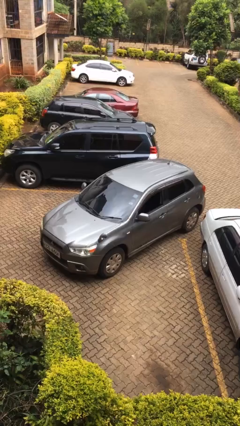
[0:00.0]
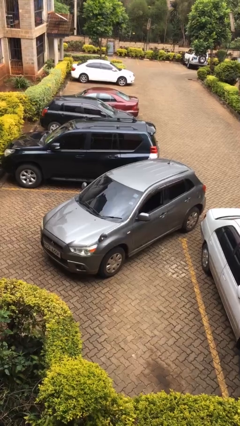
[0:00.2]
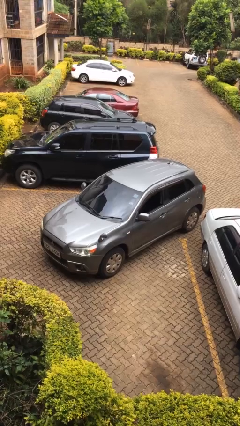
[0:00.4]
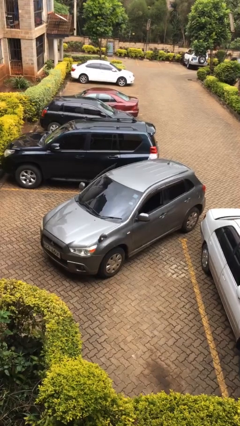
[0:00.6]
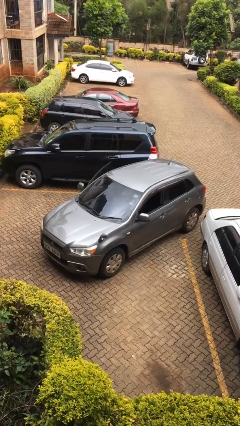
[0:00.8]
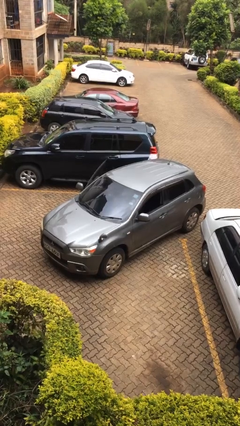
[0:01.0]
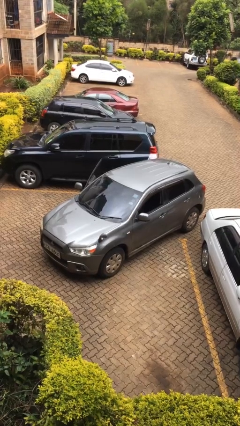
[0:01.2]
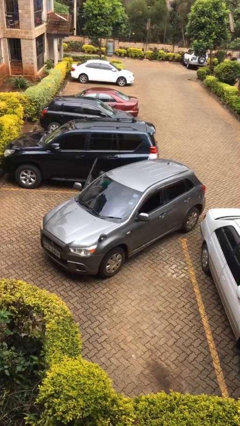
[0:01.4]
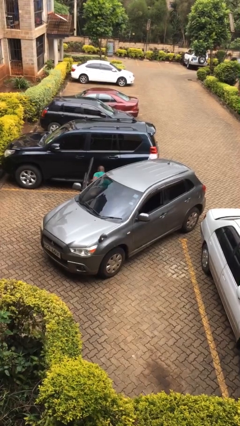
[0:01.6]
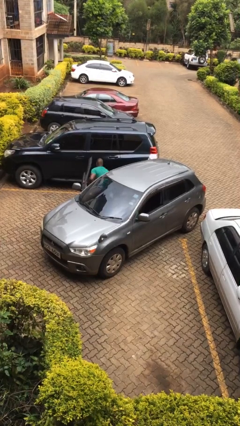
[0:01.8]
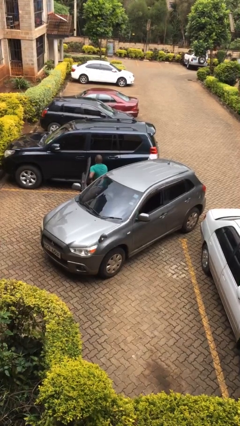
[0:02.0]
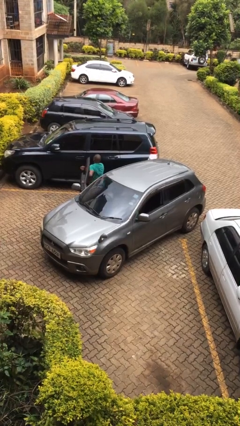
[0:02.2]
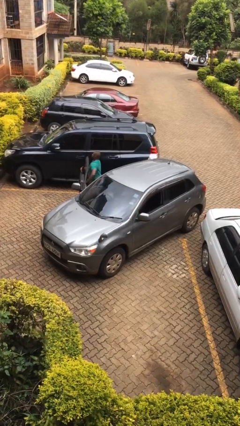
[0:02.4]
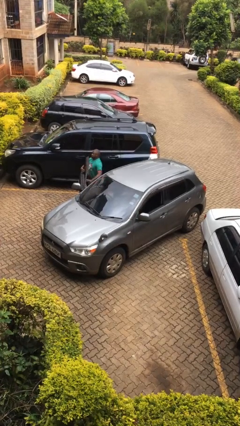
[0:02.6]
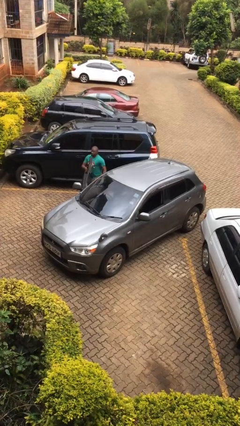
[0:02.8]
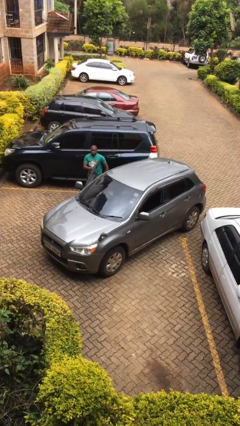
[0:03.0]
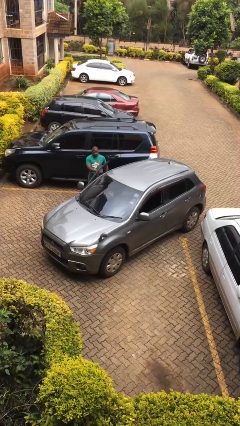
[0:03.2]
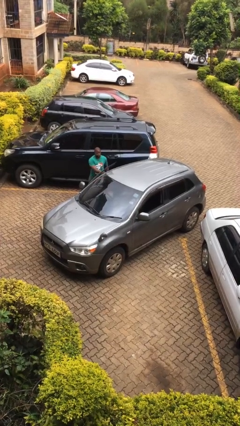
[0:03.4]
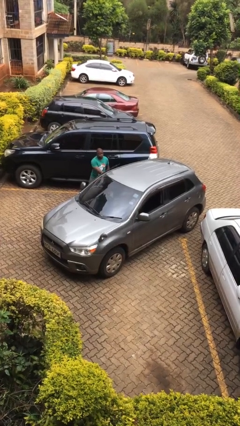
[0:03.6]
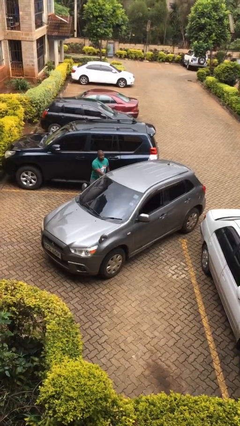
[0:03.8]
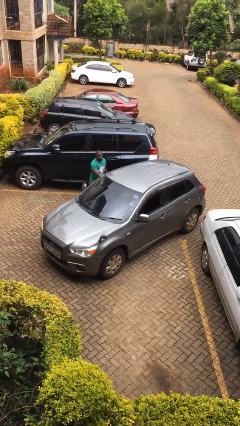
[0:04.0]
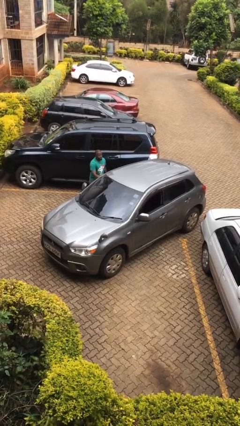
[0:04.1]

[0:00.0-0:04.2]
car drops off person

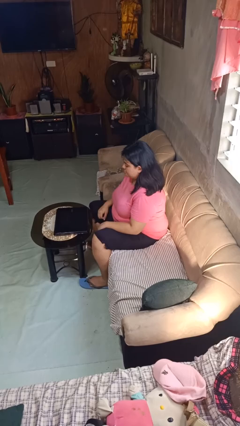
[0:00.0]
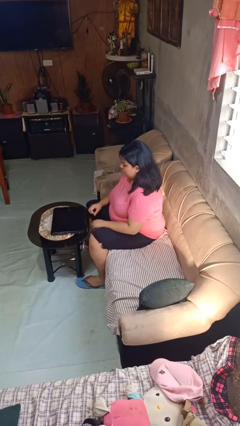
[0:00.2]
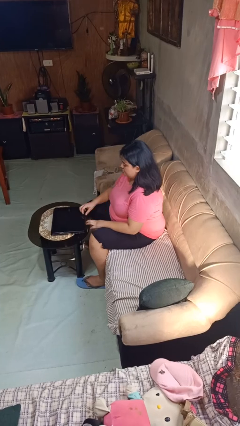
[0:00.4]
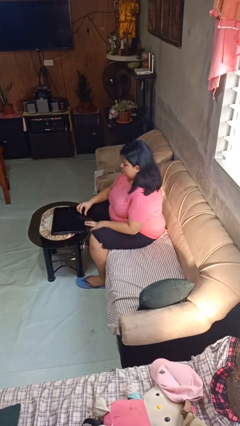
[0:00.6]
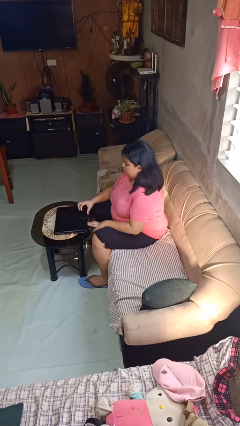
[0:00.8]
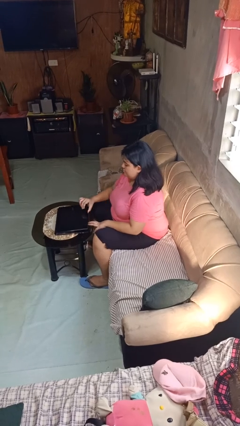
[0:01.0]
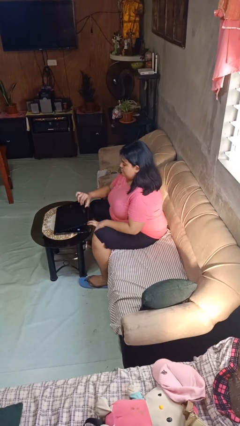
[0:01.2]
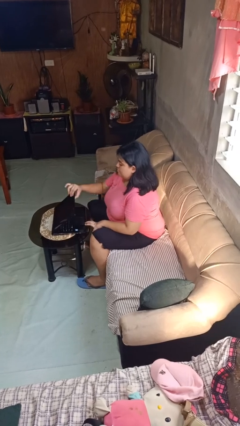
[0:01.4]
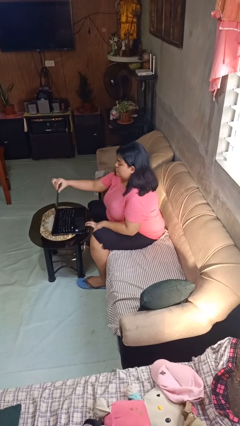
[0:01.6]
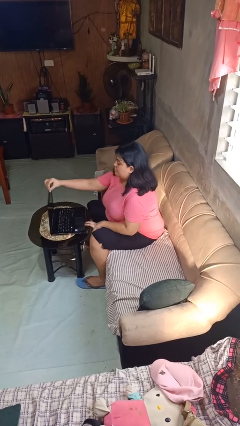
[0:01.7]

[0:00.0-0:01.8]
person opens laptop

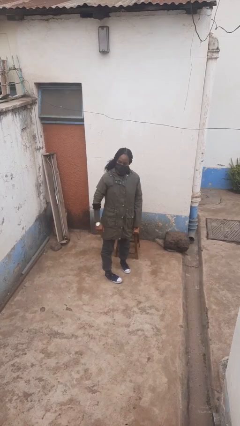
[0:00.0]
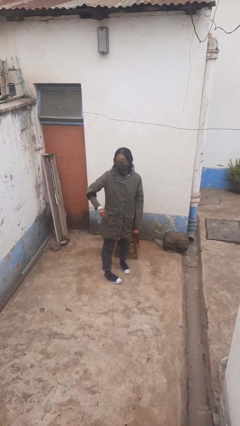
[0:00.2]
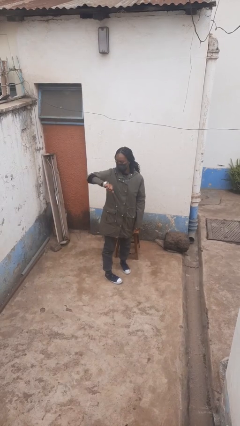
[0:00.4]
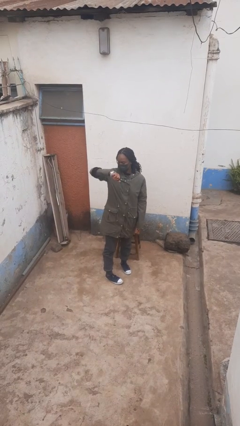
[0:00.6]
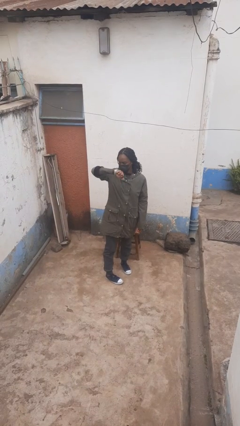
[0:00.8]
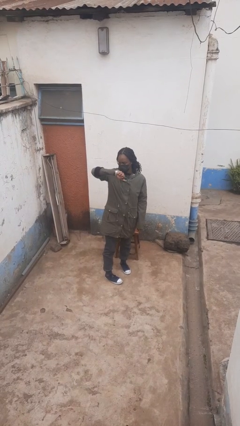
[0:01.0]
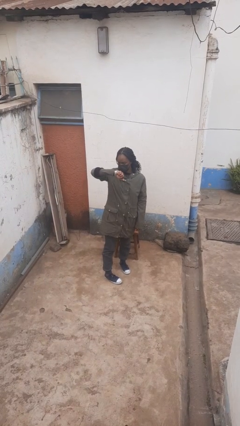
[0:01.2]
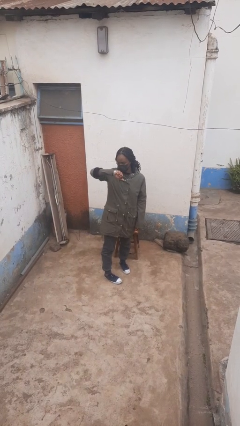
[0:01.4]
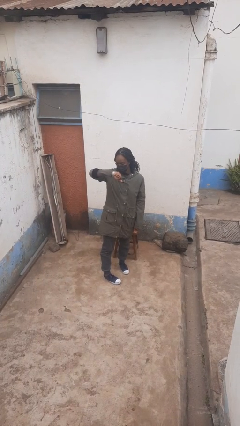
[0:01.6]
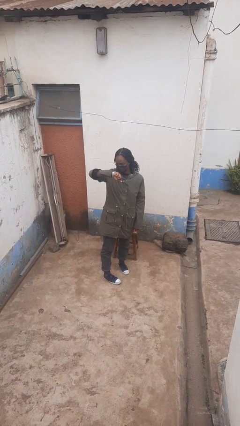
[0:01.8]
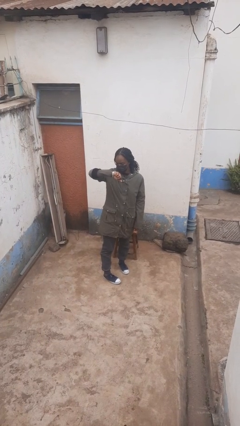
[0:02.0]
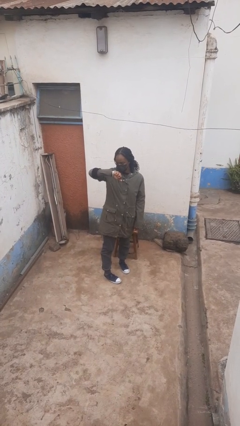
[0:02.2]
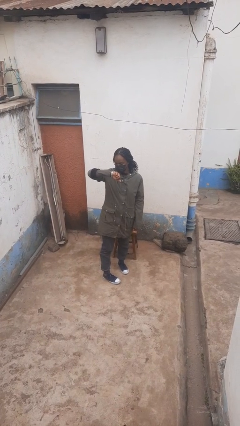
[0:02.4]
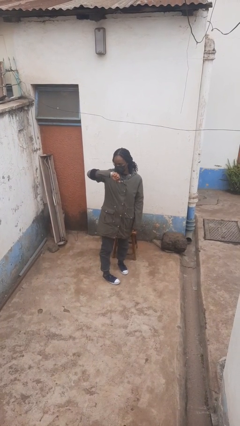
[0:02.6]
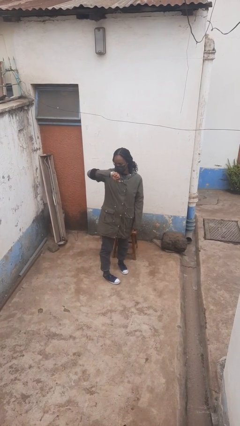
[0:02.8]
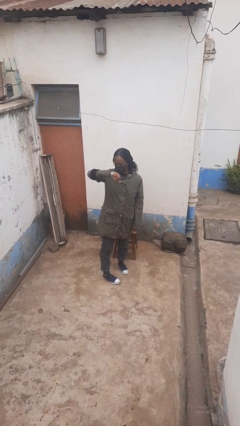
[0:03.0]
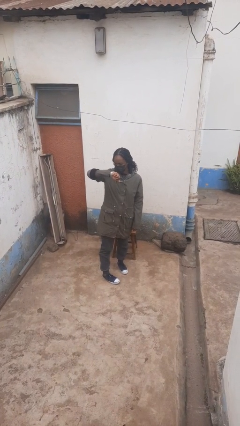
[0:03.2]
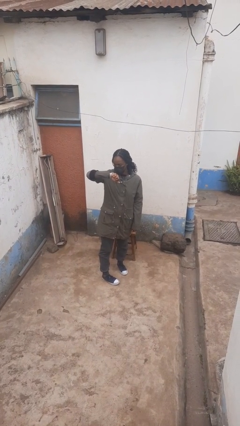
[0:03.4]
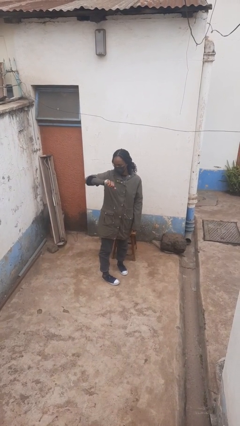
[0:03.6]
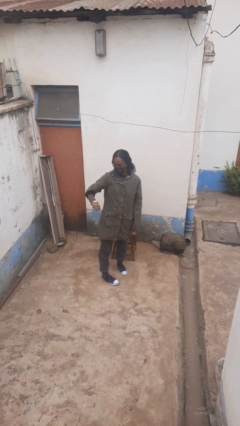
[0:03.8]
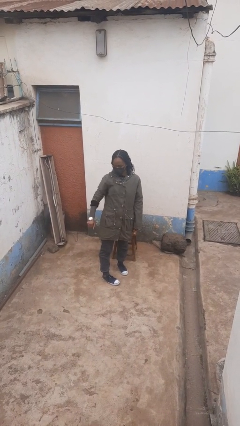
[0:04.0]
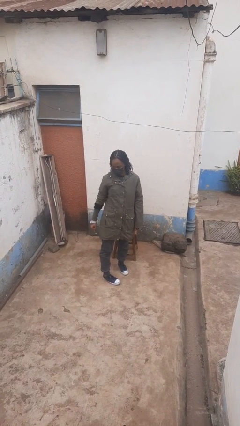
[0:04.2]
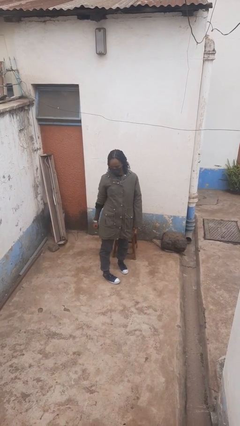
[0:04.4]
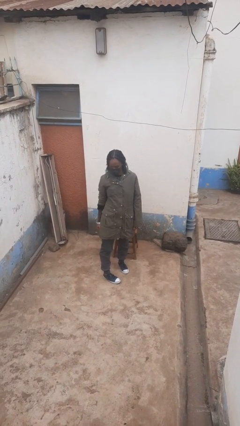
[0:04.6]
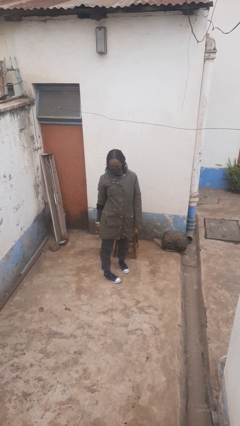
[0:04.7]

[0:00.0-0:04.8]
person looks at wristwatch

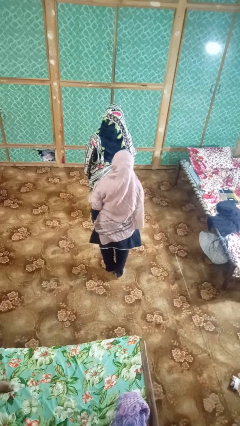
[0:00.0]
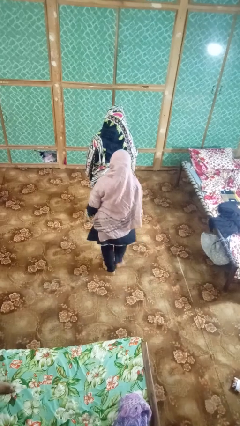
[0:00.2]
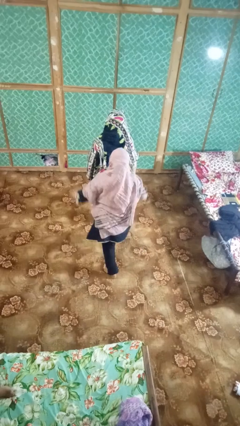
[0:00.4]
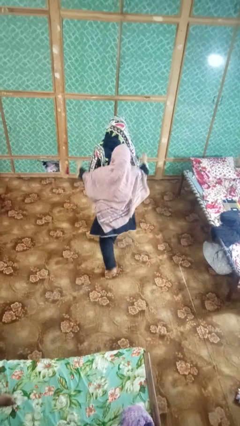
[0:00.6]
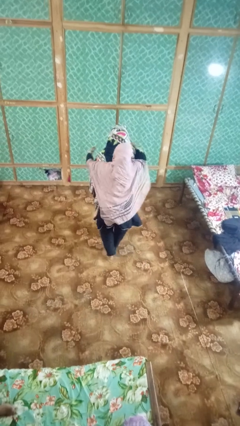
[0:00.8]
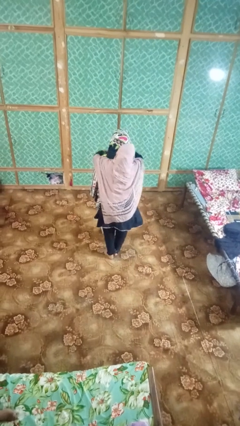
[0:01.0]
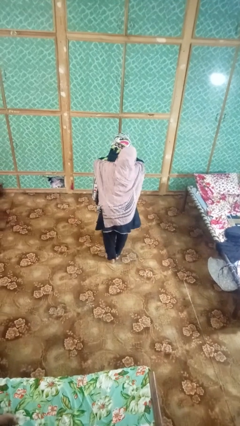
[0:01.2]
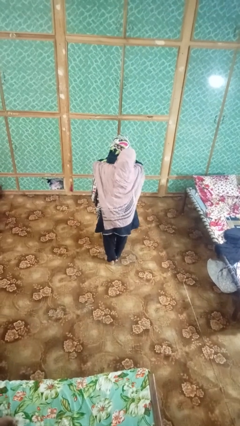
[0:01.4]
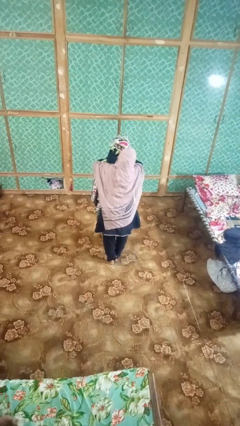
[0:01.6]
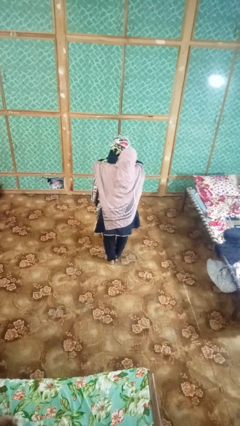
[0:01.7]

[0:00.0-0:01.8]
person hugs person from behind

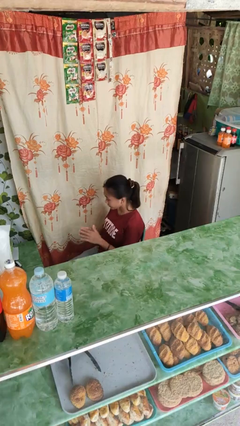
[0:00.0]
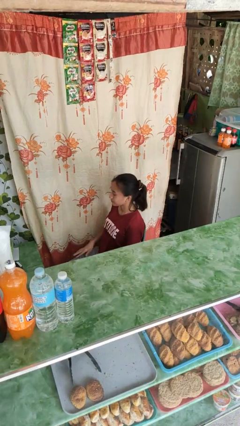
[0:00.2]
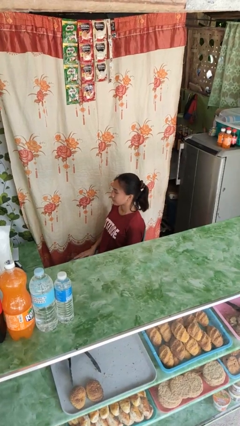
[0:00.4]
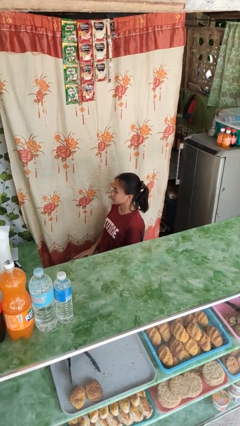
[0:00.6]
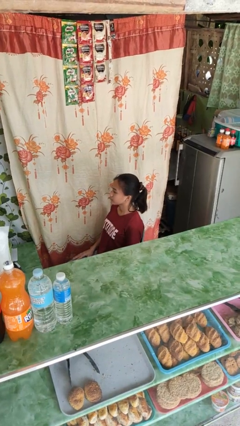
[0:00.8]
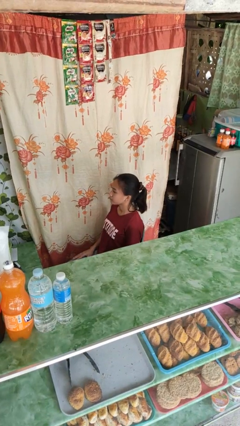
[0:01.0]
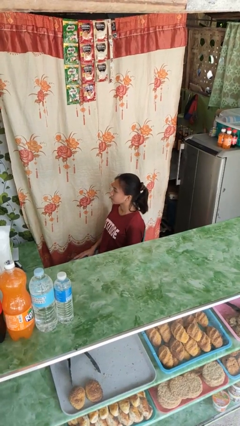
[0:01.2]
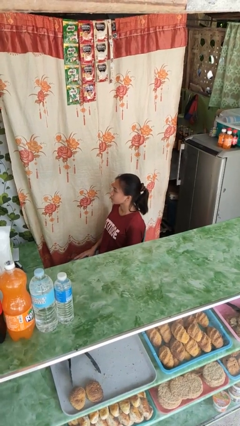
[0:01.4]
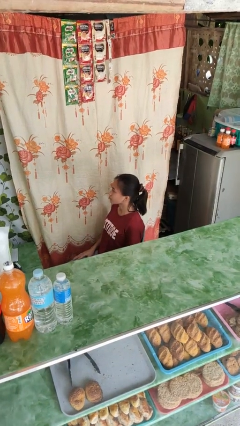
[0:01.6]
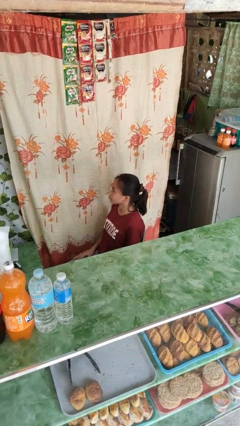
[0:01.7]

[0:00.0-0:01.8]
person rubs eyes

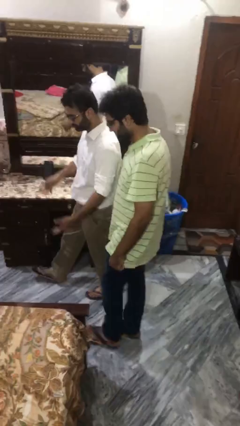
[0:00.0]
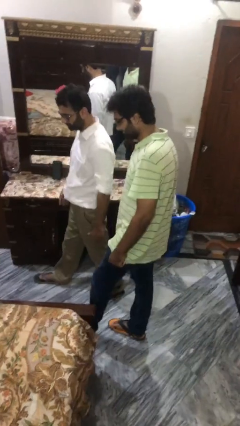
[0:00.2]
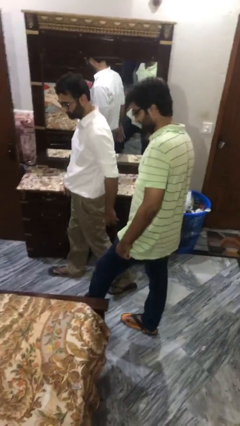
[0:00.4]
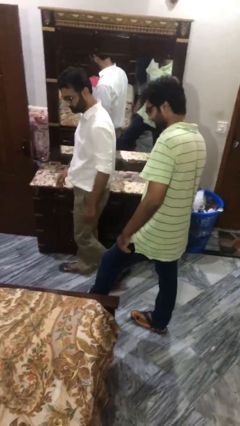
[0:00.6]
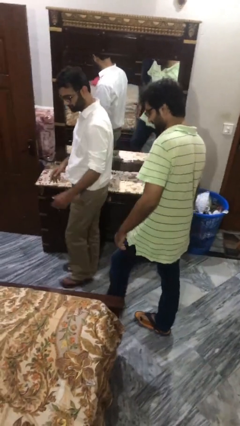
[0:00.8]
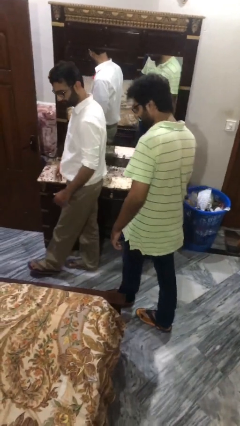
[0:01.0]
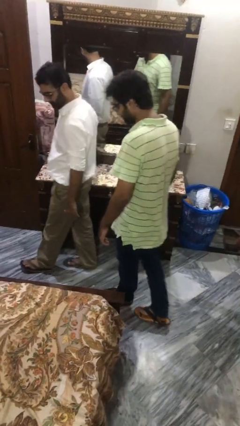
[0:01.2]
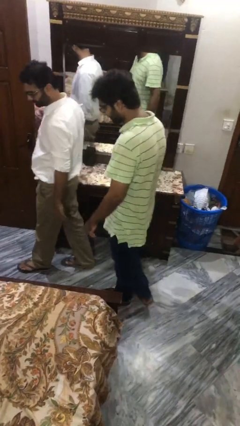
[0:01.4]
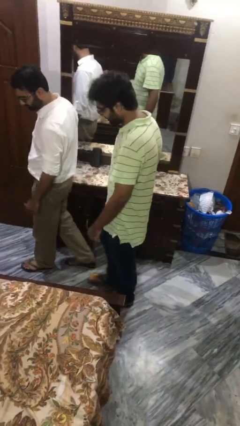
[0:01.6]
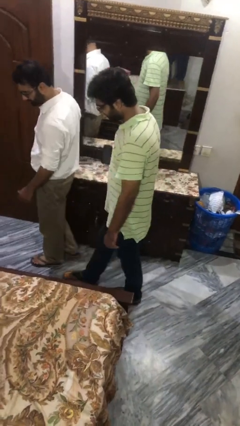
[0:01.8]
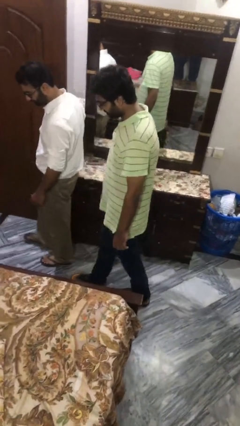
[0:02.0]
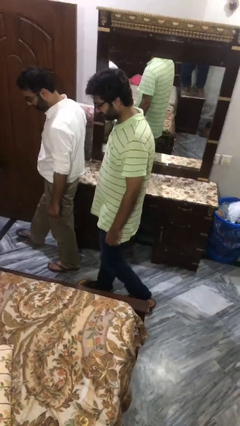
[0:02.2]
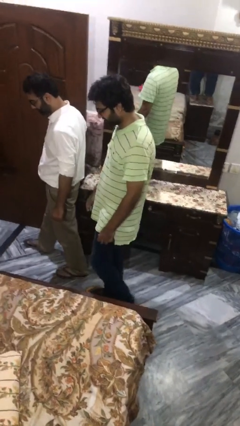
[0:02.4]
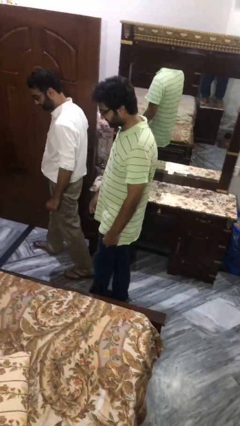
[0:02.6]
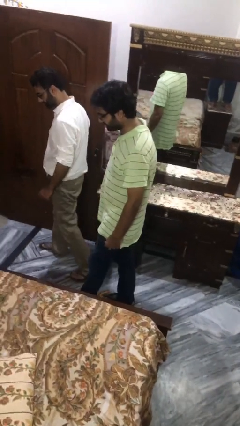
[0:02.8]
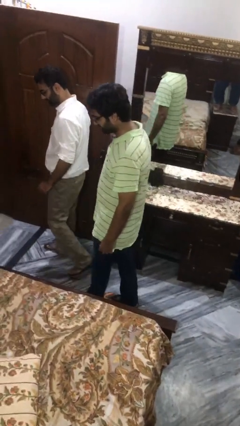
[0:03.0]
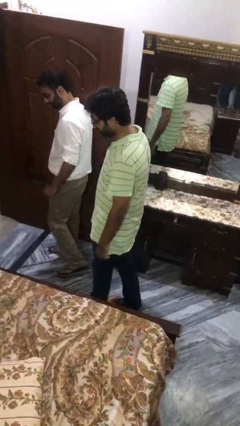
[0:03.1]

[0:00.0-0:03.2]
person talks to person
